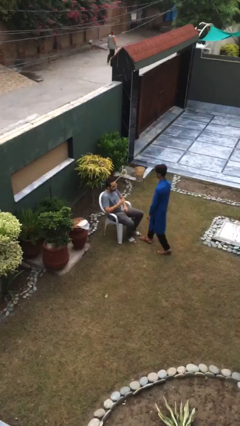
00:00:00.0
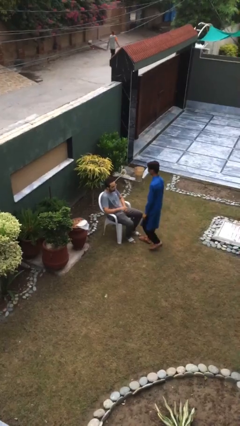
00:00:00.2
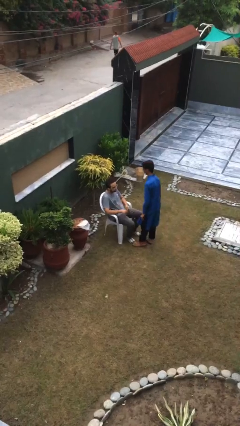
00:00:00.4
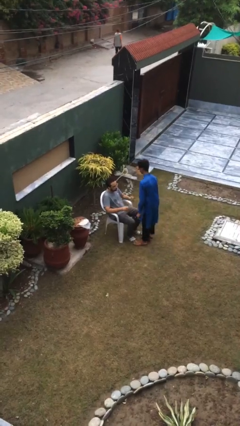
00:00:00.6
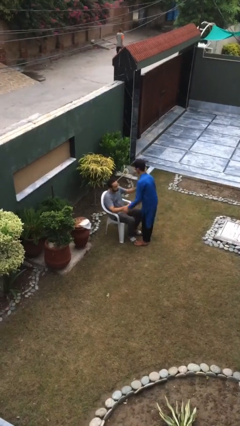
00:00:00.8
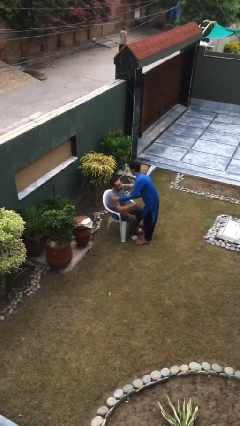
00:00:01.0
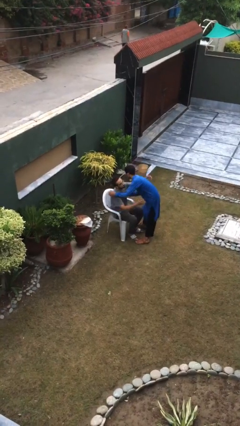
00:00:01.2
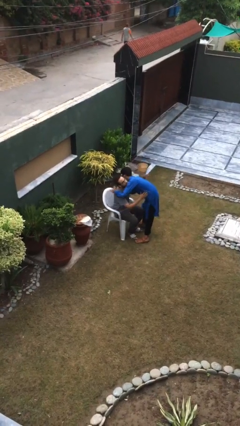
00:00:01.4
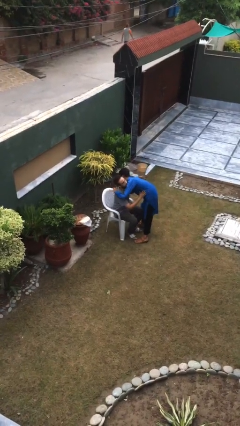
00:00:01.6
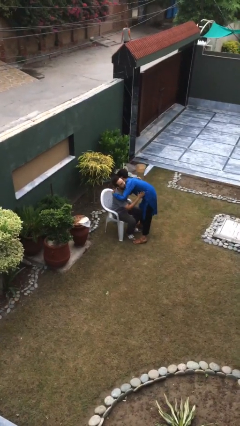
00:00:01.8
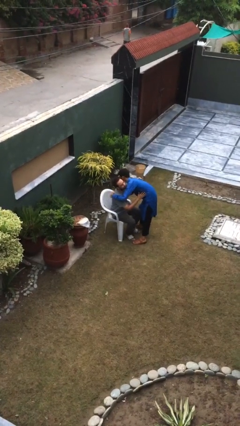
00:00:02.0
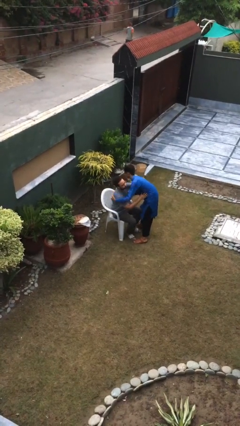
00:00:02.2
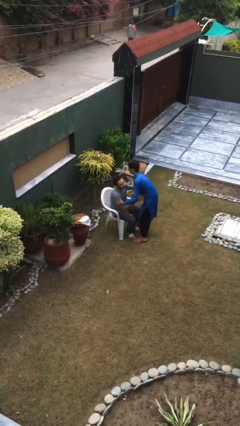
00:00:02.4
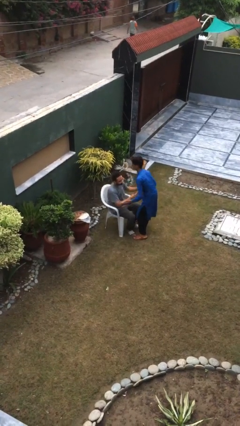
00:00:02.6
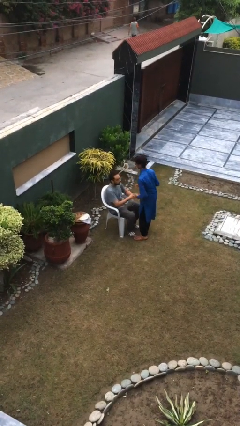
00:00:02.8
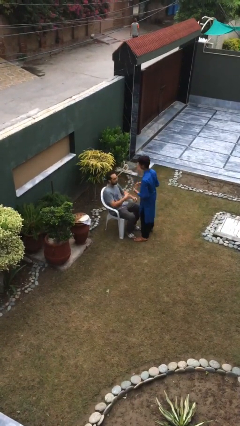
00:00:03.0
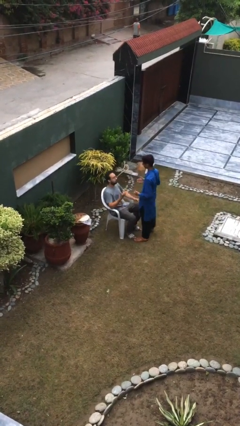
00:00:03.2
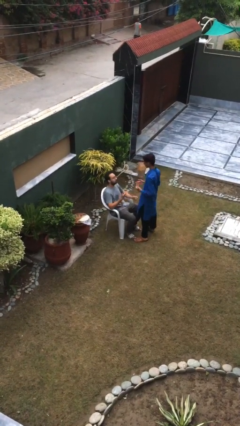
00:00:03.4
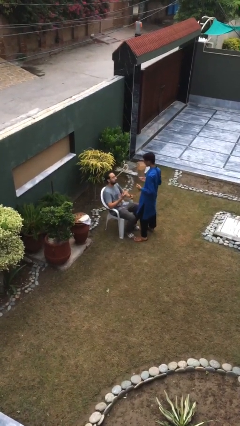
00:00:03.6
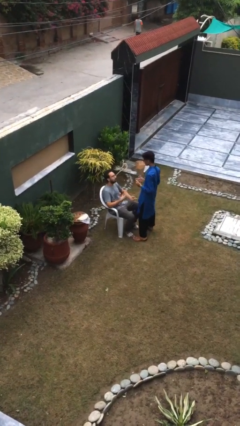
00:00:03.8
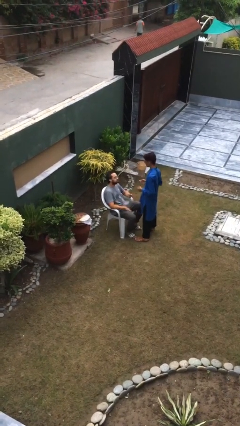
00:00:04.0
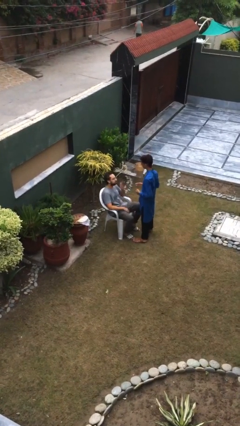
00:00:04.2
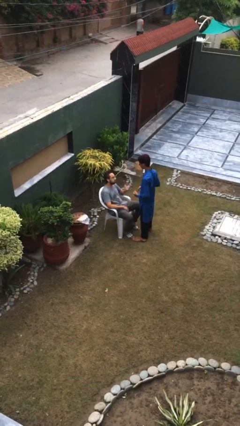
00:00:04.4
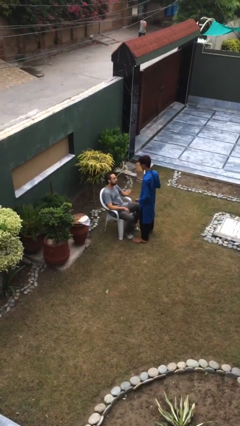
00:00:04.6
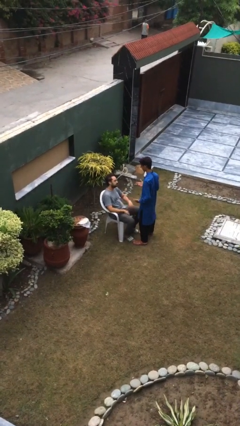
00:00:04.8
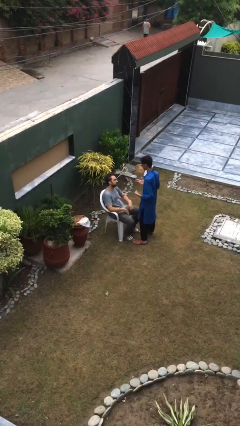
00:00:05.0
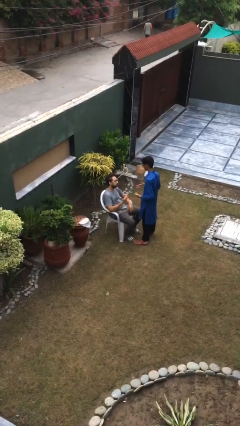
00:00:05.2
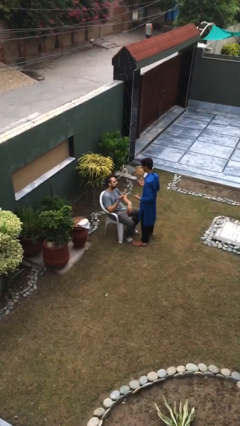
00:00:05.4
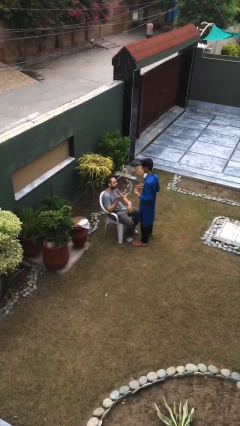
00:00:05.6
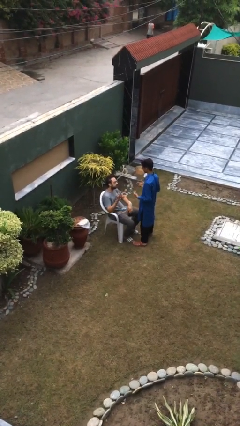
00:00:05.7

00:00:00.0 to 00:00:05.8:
person embraces person

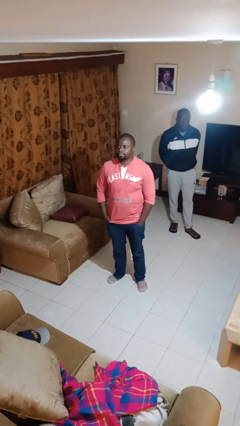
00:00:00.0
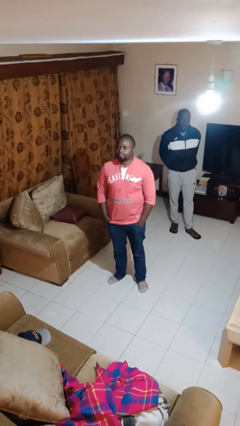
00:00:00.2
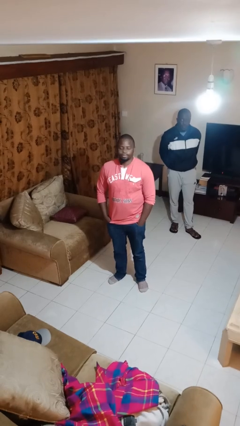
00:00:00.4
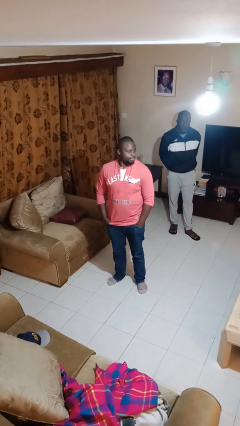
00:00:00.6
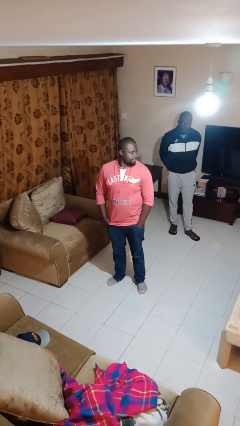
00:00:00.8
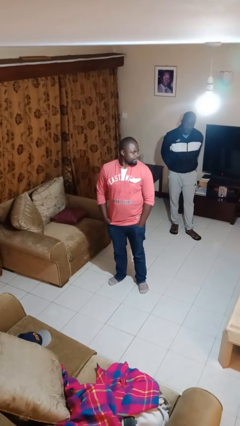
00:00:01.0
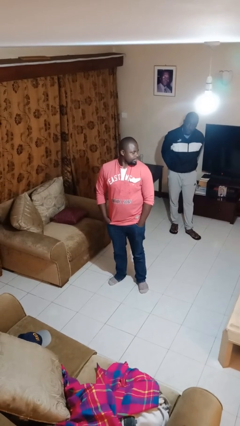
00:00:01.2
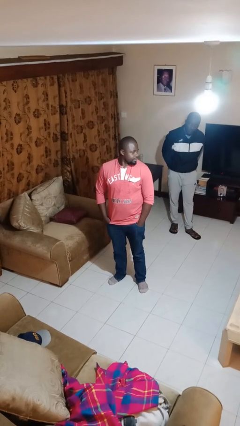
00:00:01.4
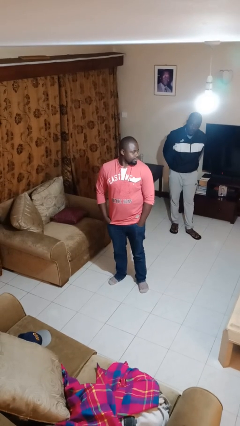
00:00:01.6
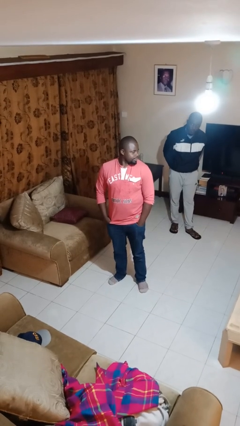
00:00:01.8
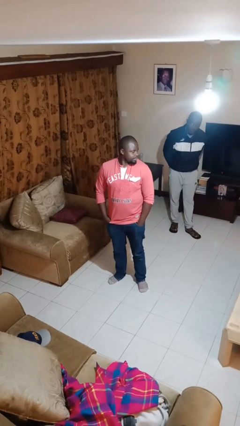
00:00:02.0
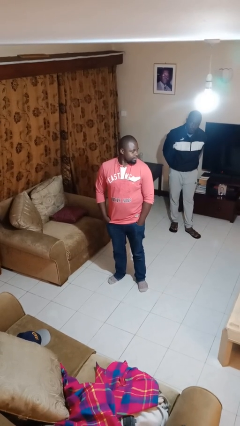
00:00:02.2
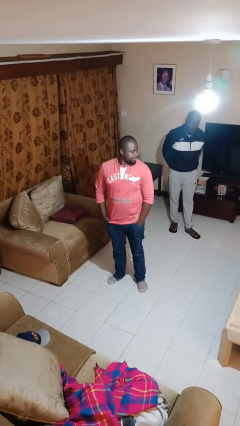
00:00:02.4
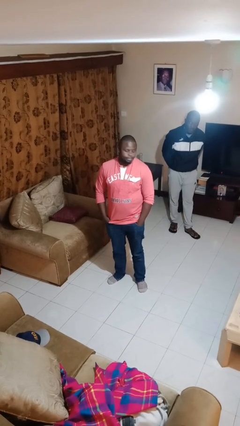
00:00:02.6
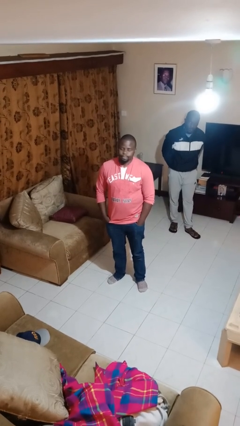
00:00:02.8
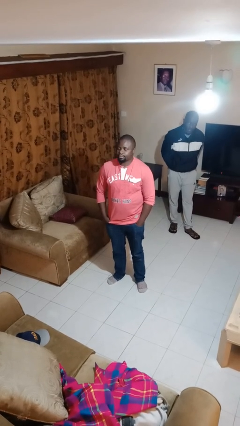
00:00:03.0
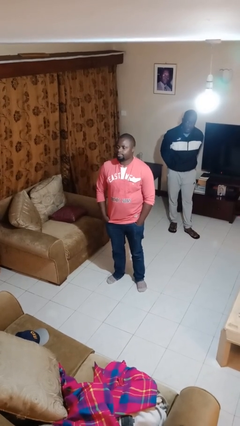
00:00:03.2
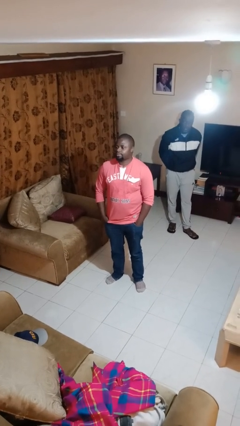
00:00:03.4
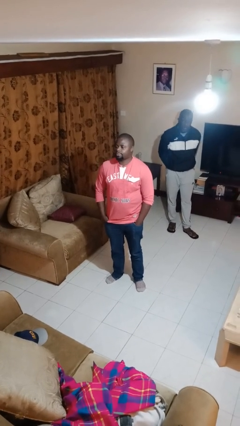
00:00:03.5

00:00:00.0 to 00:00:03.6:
person looks over shoulder

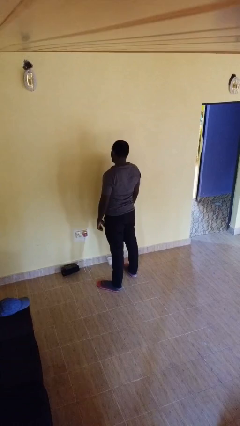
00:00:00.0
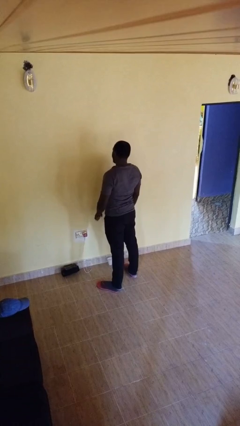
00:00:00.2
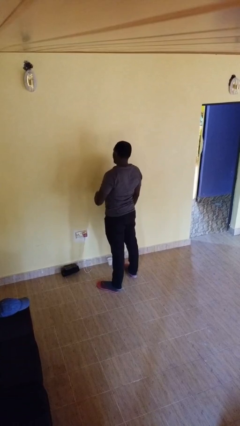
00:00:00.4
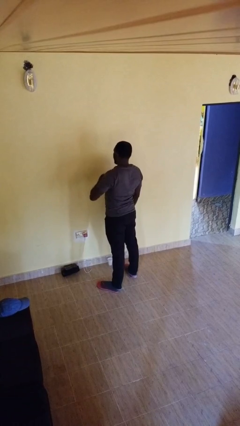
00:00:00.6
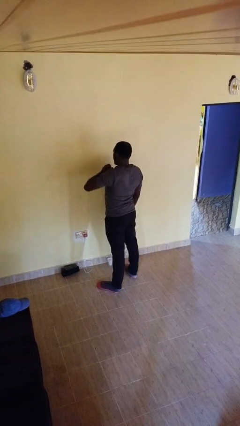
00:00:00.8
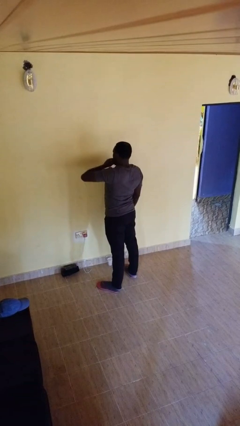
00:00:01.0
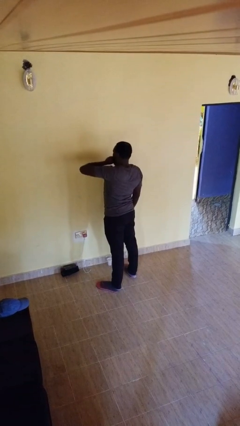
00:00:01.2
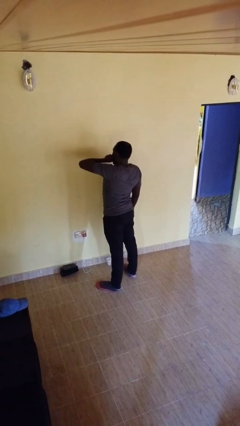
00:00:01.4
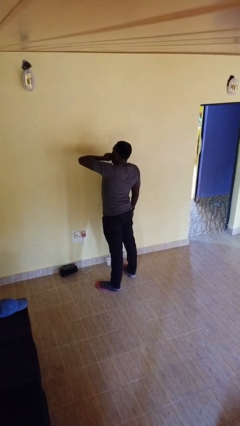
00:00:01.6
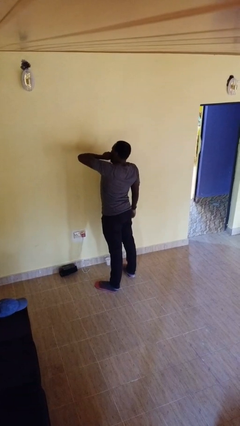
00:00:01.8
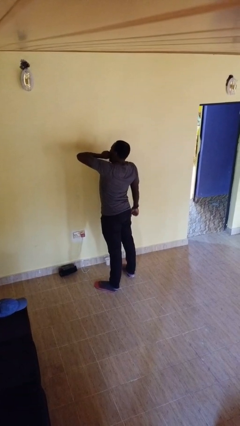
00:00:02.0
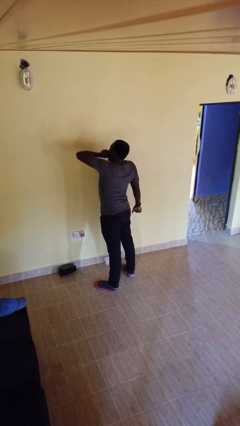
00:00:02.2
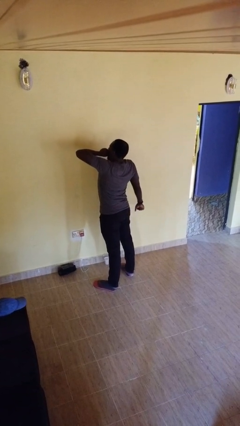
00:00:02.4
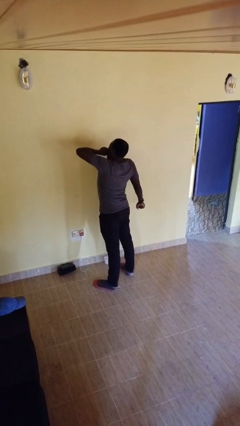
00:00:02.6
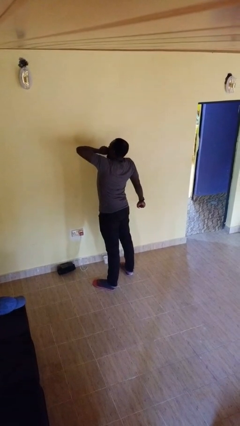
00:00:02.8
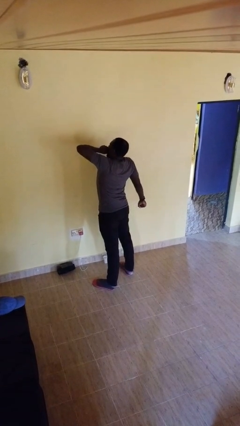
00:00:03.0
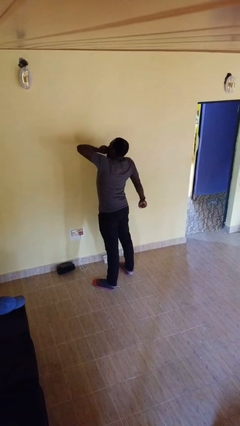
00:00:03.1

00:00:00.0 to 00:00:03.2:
person yawns

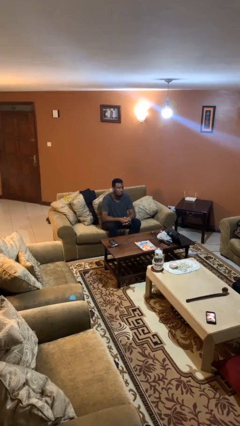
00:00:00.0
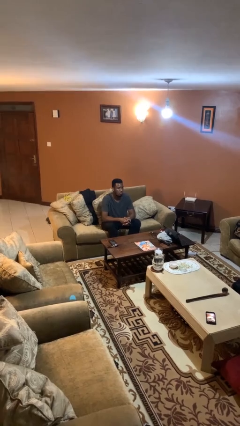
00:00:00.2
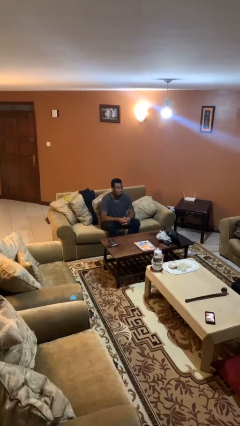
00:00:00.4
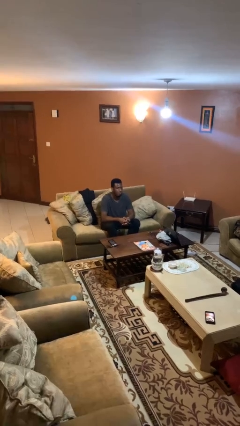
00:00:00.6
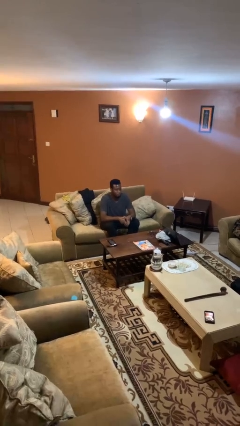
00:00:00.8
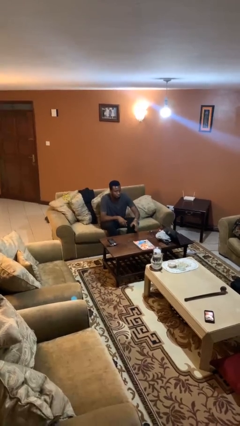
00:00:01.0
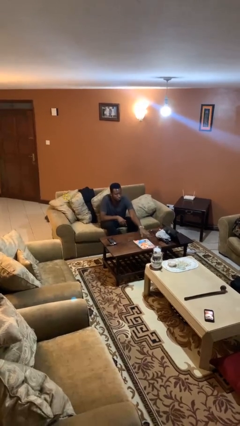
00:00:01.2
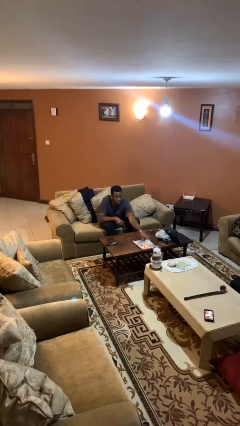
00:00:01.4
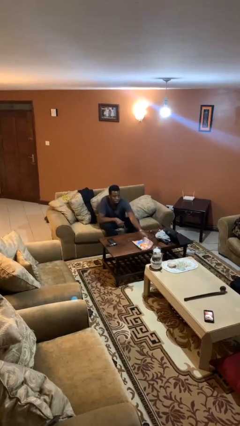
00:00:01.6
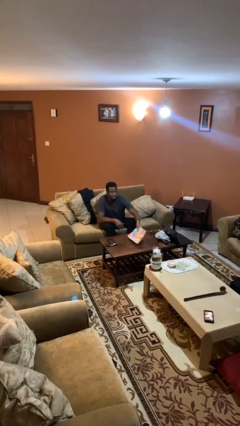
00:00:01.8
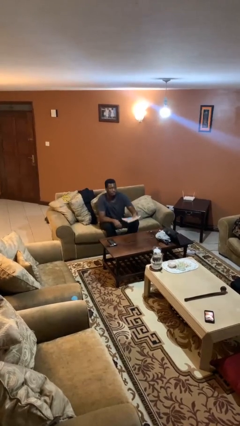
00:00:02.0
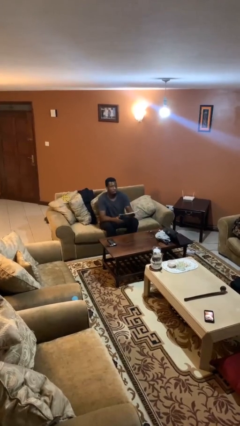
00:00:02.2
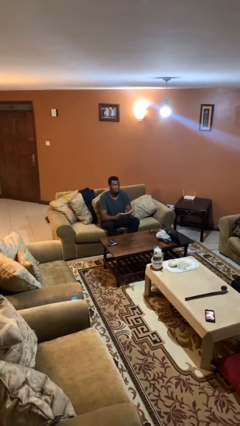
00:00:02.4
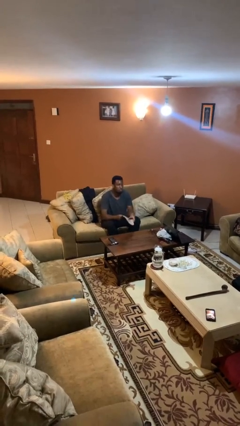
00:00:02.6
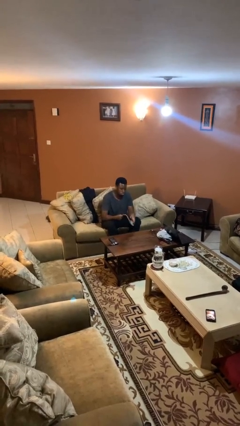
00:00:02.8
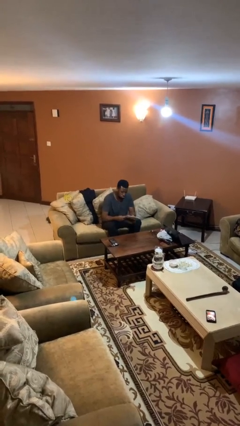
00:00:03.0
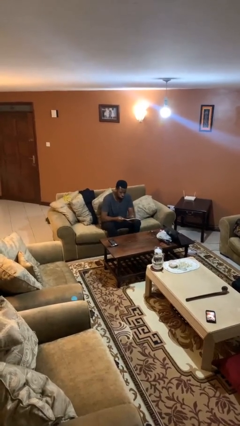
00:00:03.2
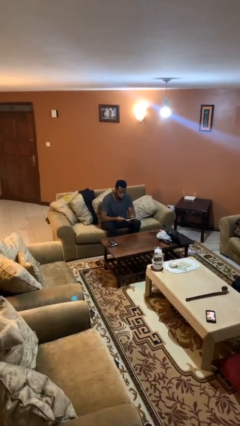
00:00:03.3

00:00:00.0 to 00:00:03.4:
person picks up object from table

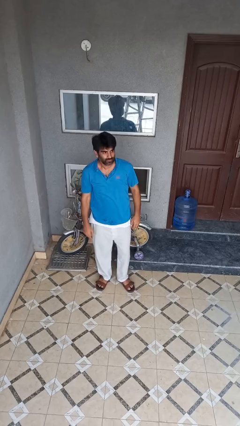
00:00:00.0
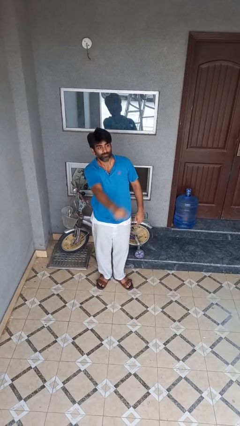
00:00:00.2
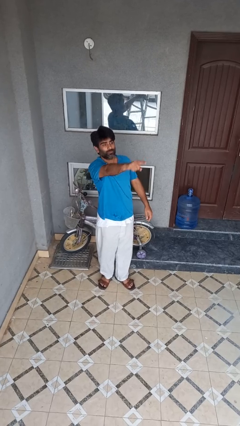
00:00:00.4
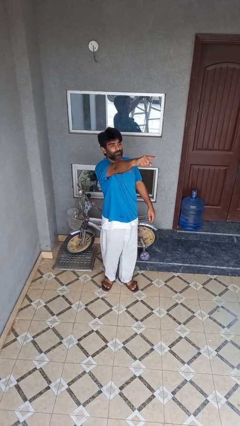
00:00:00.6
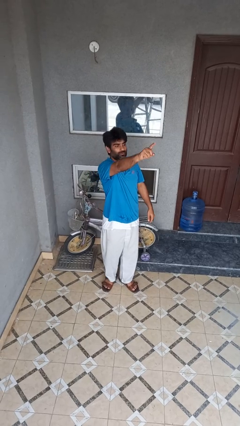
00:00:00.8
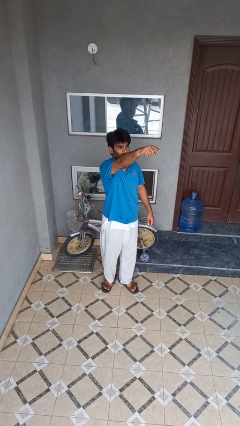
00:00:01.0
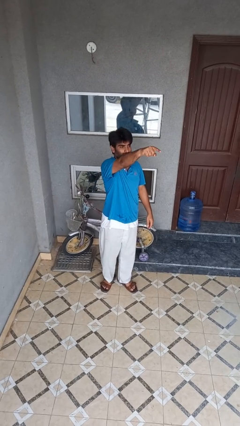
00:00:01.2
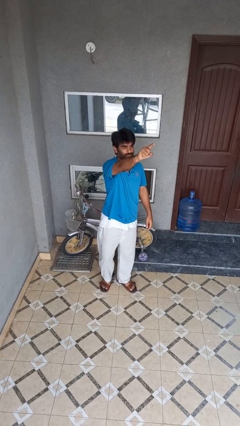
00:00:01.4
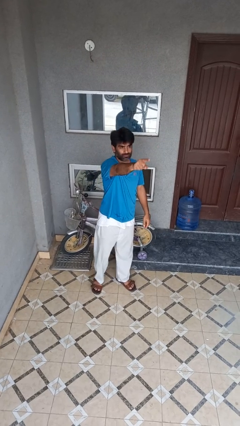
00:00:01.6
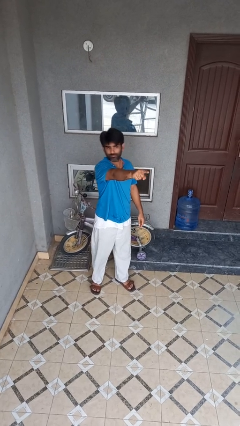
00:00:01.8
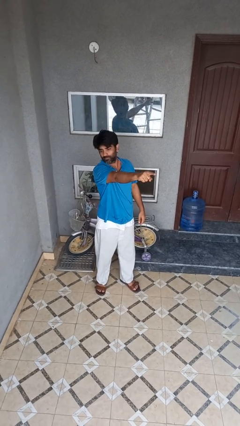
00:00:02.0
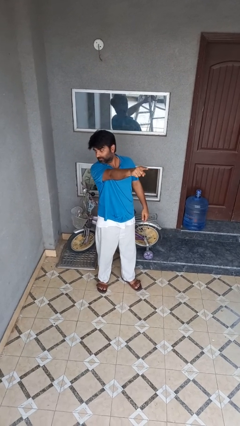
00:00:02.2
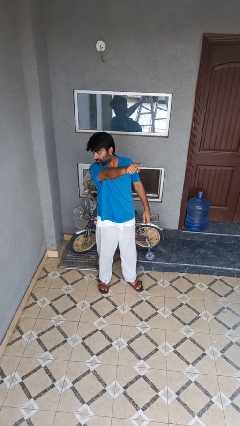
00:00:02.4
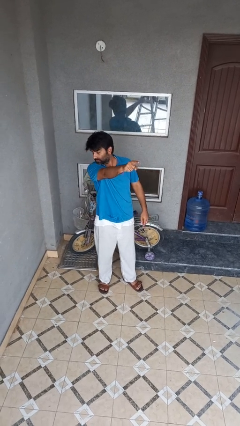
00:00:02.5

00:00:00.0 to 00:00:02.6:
person points at person
